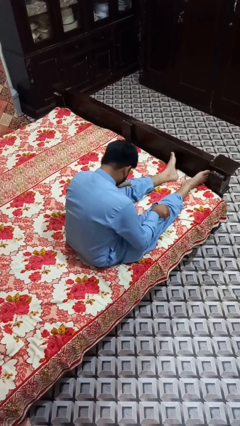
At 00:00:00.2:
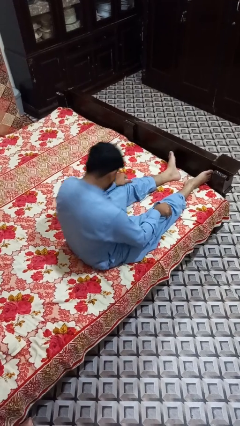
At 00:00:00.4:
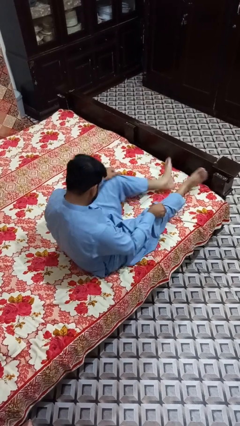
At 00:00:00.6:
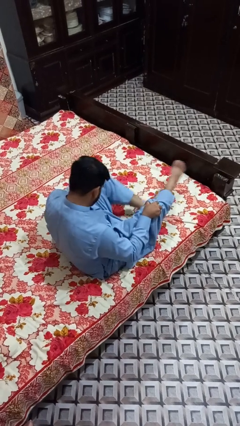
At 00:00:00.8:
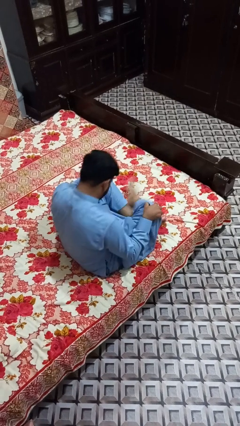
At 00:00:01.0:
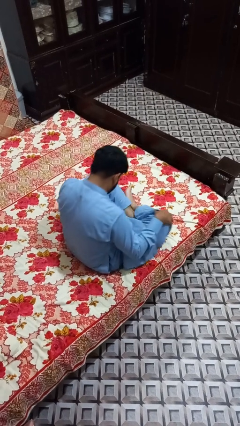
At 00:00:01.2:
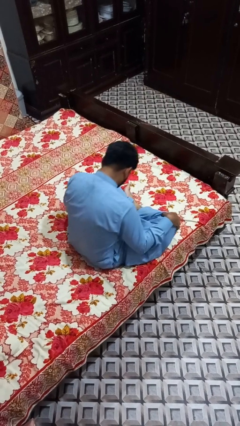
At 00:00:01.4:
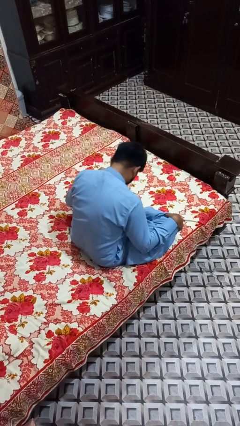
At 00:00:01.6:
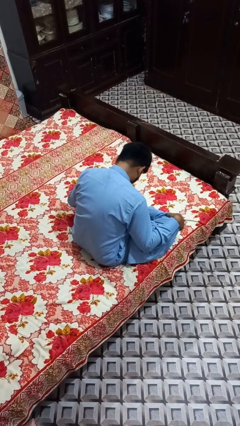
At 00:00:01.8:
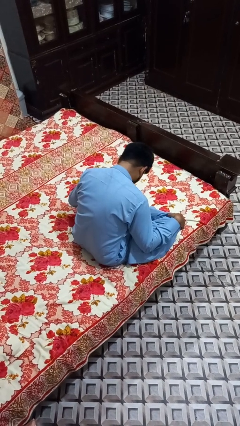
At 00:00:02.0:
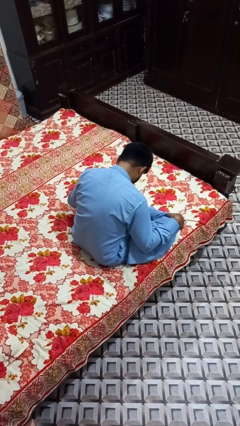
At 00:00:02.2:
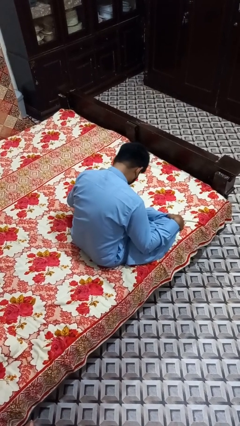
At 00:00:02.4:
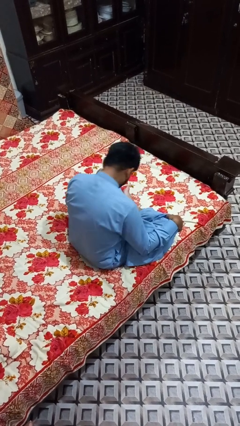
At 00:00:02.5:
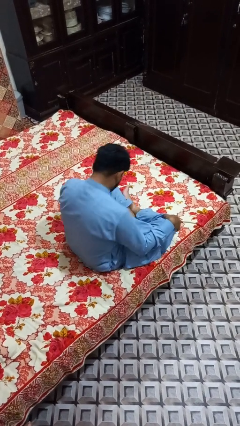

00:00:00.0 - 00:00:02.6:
person crosses legs

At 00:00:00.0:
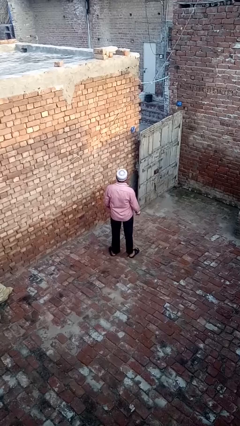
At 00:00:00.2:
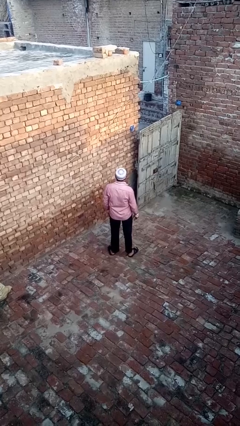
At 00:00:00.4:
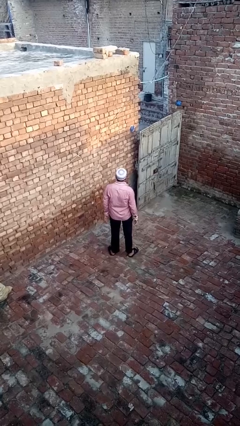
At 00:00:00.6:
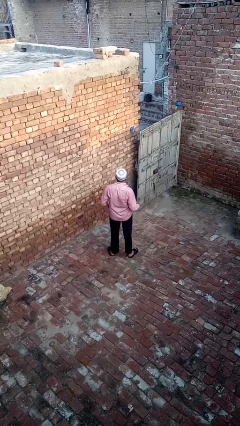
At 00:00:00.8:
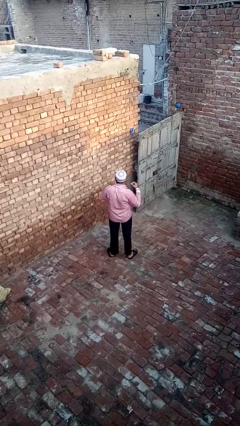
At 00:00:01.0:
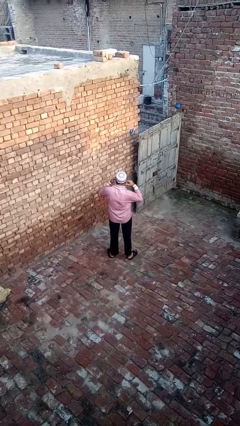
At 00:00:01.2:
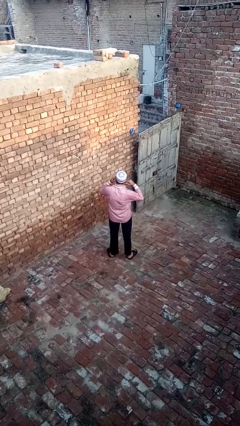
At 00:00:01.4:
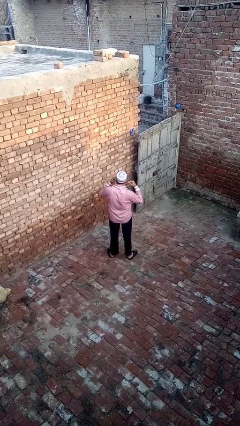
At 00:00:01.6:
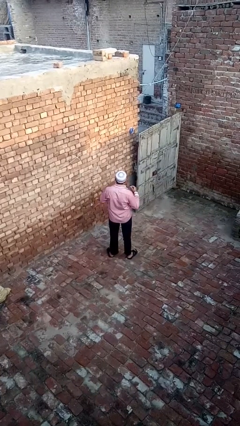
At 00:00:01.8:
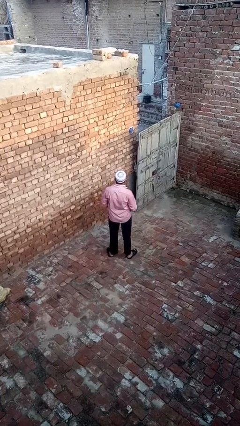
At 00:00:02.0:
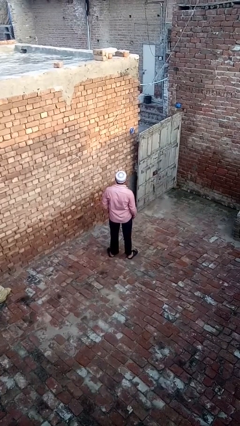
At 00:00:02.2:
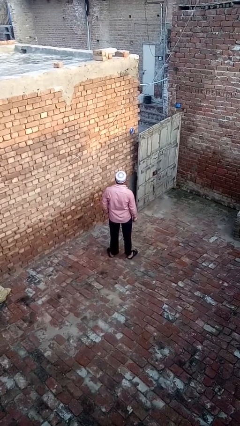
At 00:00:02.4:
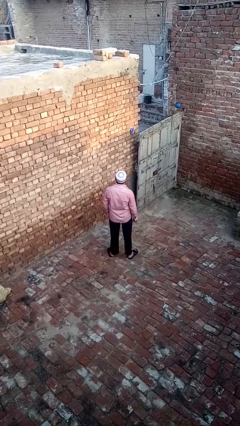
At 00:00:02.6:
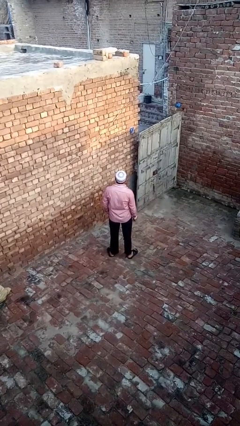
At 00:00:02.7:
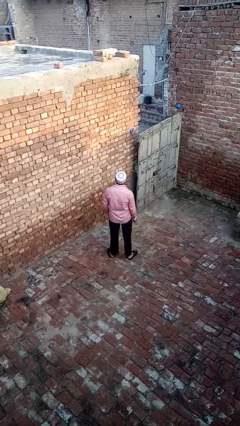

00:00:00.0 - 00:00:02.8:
person takes off headphones

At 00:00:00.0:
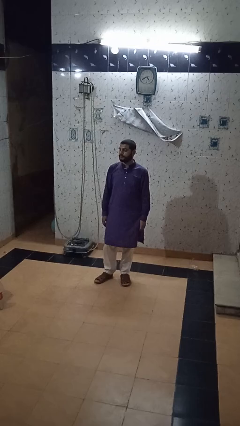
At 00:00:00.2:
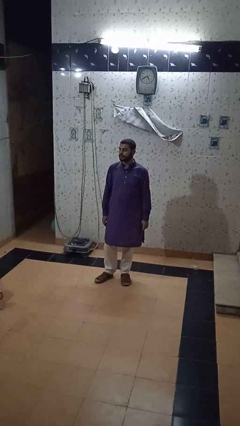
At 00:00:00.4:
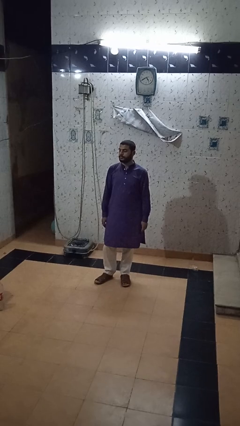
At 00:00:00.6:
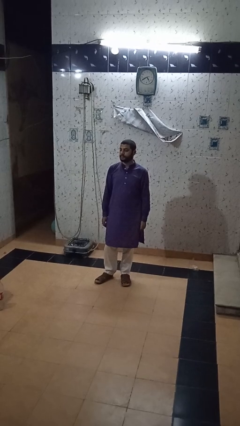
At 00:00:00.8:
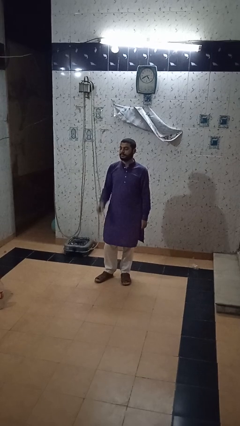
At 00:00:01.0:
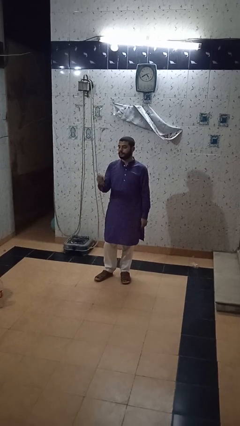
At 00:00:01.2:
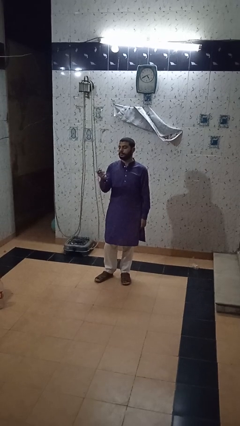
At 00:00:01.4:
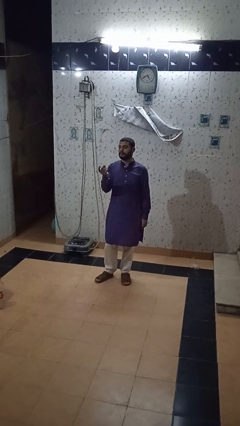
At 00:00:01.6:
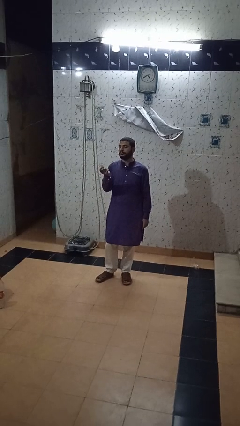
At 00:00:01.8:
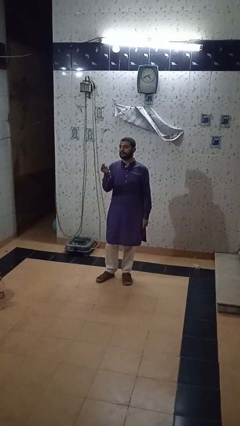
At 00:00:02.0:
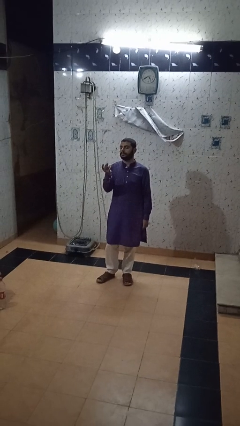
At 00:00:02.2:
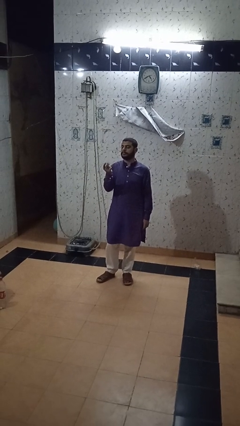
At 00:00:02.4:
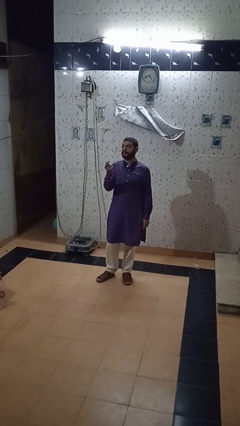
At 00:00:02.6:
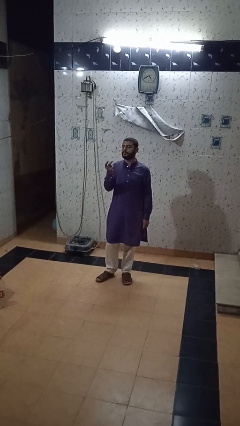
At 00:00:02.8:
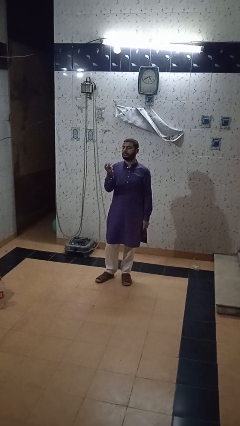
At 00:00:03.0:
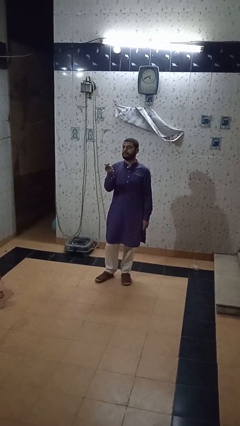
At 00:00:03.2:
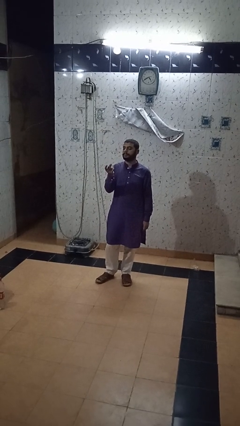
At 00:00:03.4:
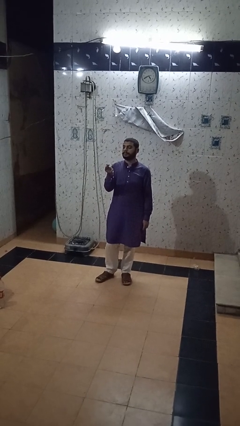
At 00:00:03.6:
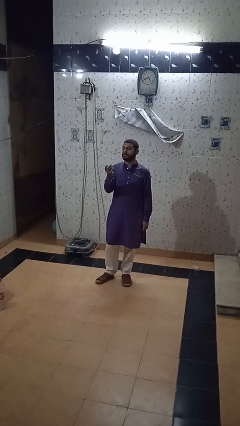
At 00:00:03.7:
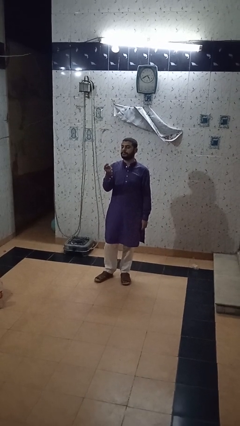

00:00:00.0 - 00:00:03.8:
person snaps fingers

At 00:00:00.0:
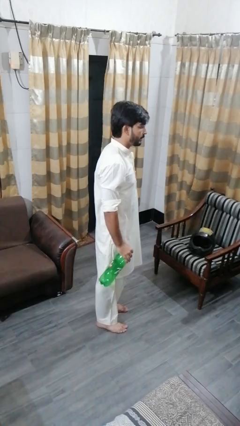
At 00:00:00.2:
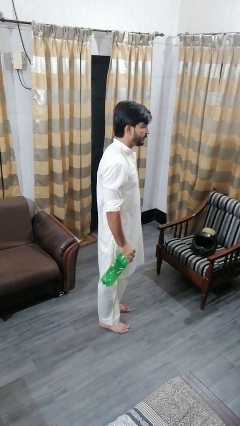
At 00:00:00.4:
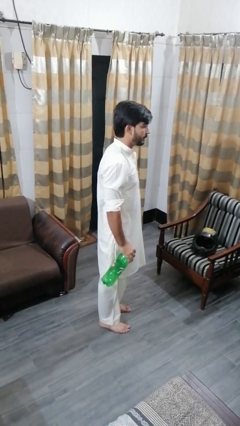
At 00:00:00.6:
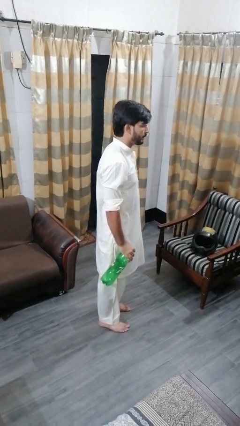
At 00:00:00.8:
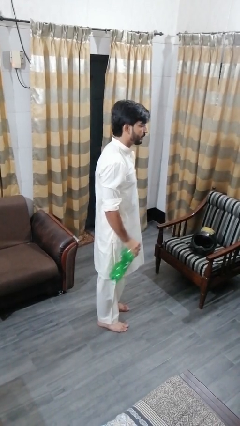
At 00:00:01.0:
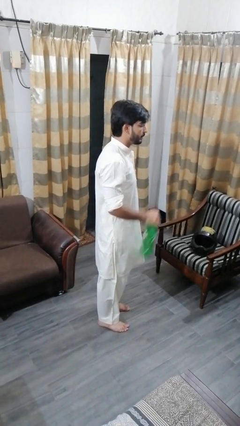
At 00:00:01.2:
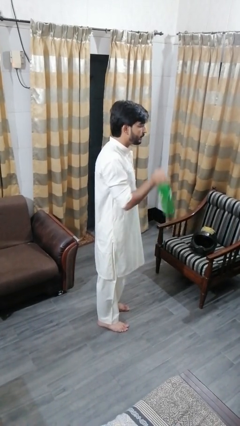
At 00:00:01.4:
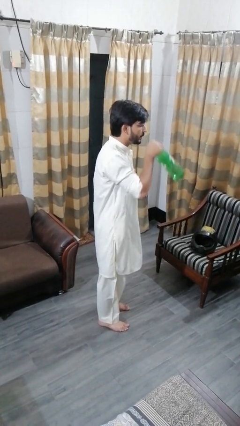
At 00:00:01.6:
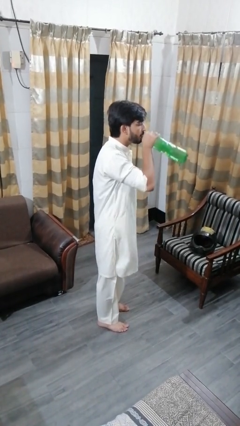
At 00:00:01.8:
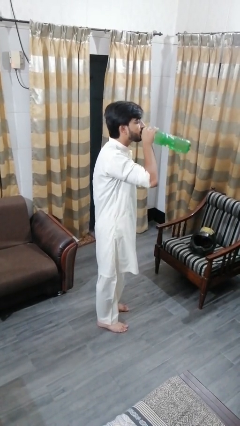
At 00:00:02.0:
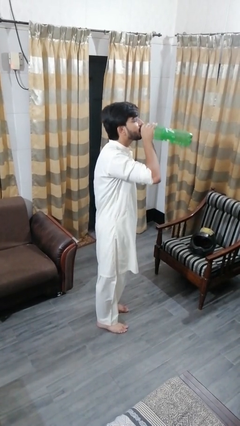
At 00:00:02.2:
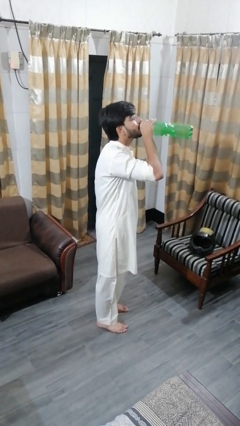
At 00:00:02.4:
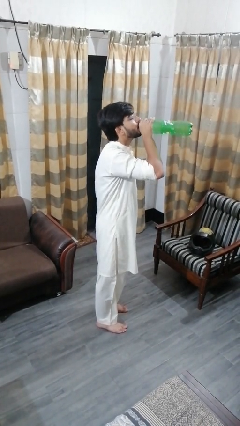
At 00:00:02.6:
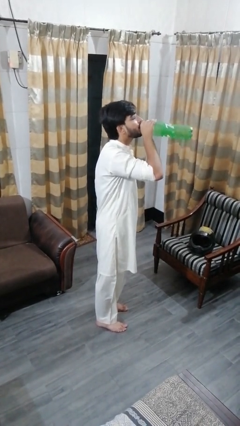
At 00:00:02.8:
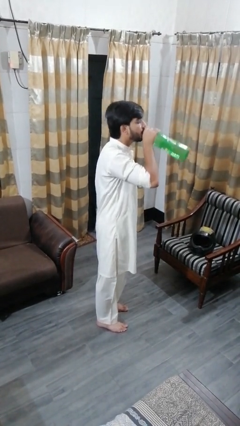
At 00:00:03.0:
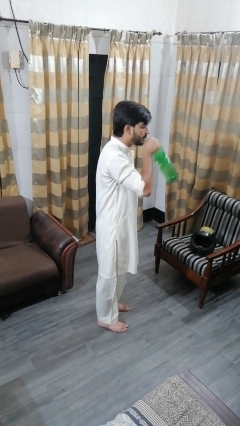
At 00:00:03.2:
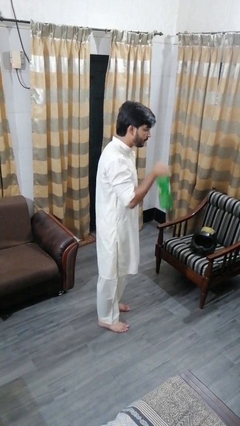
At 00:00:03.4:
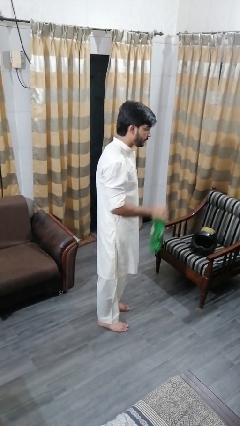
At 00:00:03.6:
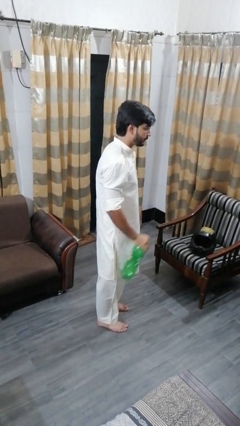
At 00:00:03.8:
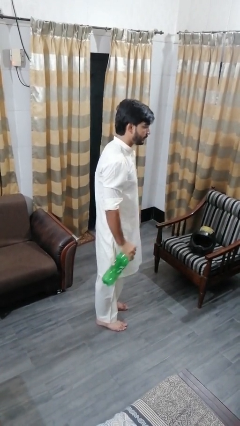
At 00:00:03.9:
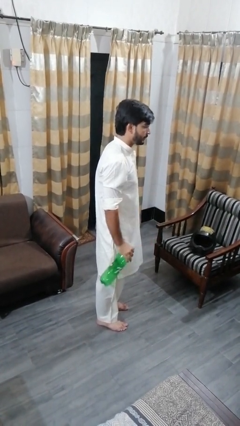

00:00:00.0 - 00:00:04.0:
person drinks from bottle

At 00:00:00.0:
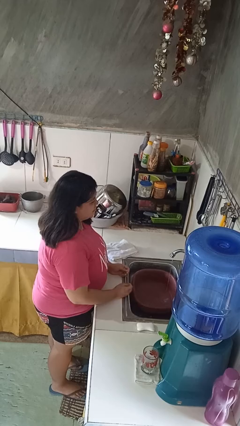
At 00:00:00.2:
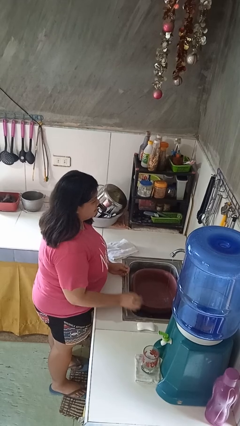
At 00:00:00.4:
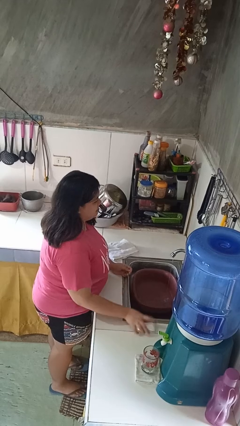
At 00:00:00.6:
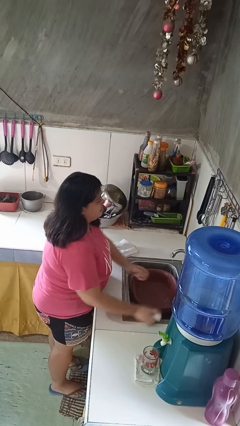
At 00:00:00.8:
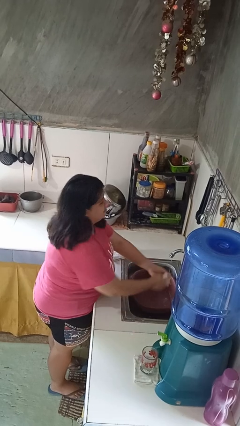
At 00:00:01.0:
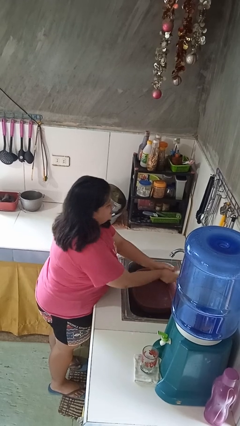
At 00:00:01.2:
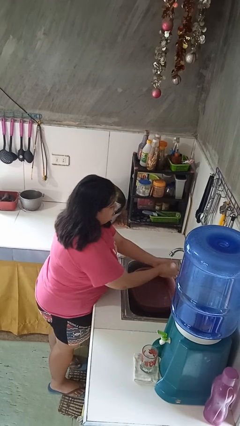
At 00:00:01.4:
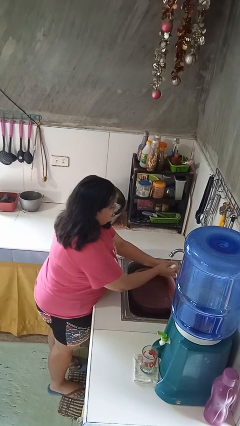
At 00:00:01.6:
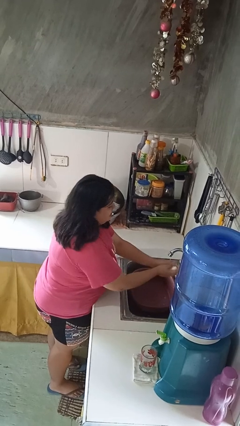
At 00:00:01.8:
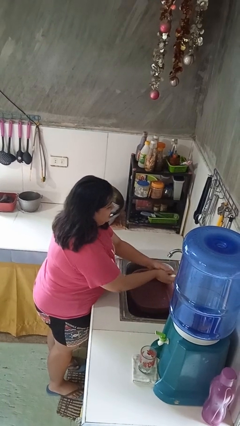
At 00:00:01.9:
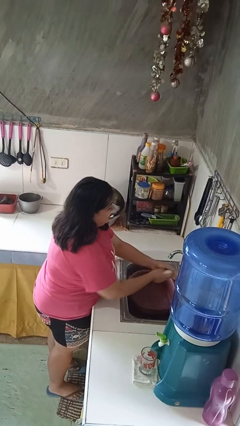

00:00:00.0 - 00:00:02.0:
person washes hands

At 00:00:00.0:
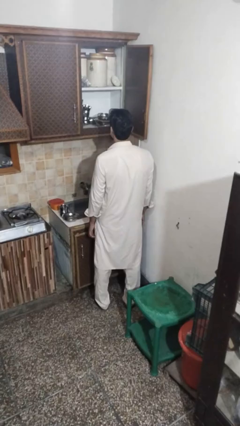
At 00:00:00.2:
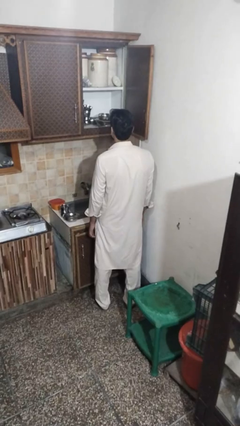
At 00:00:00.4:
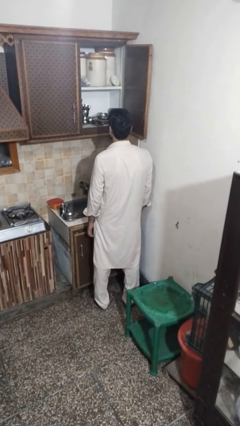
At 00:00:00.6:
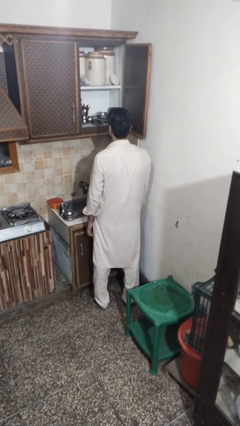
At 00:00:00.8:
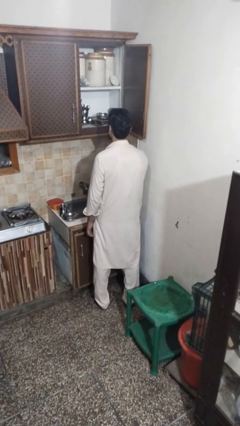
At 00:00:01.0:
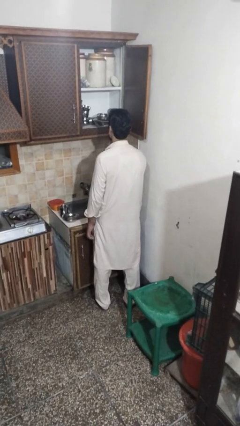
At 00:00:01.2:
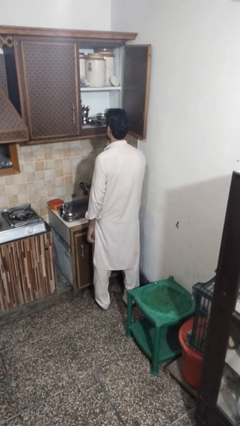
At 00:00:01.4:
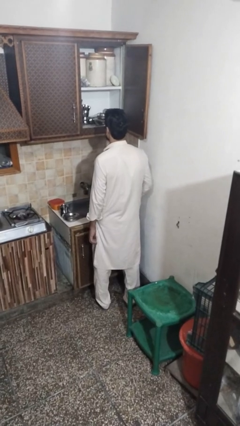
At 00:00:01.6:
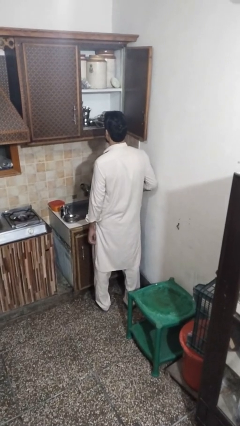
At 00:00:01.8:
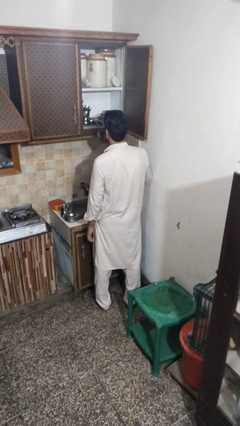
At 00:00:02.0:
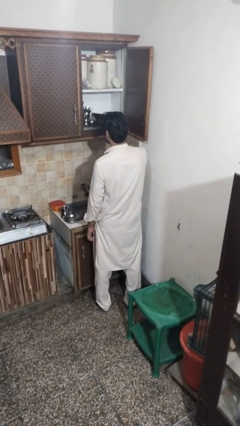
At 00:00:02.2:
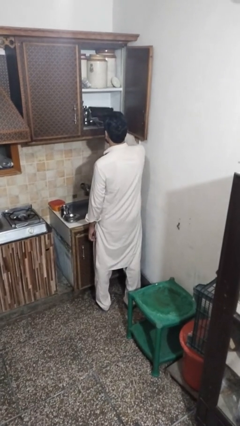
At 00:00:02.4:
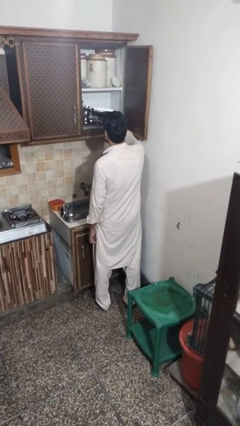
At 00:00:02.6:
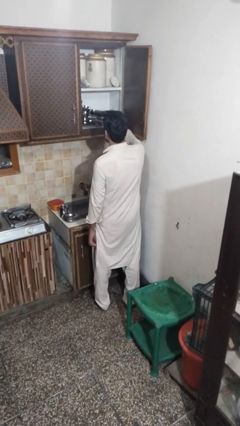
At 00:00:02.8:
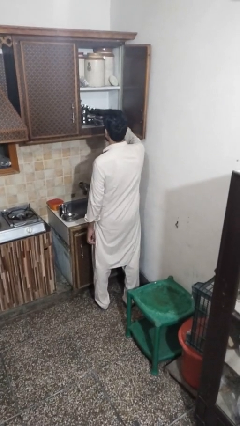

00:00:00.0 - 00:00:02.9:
person puts object in cabinet
